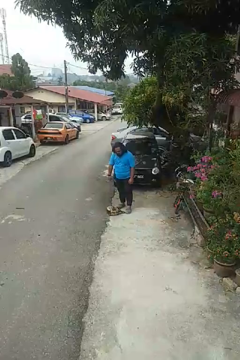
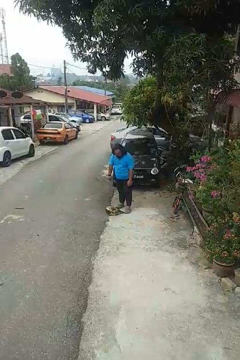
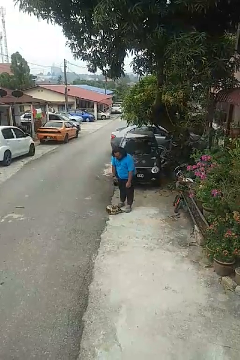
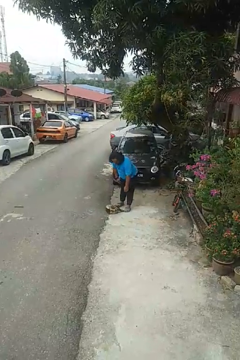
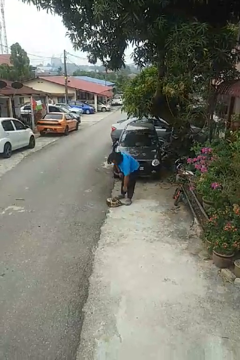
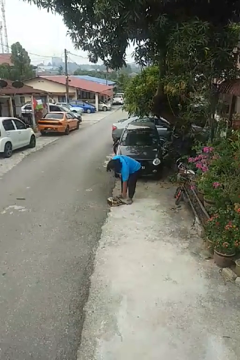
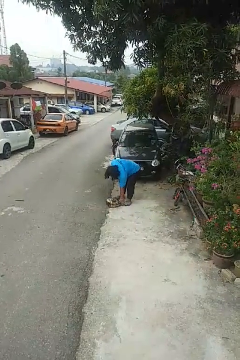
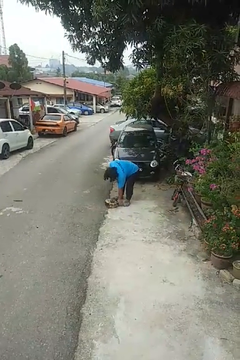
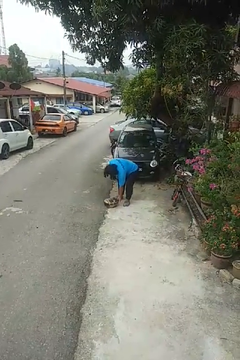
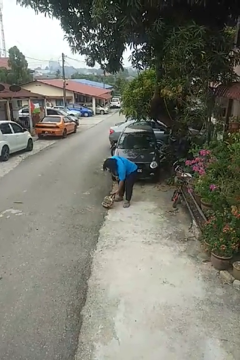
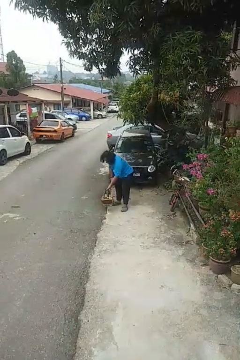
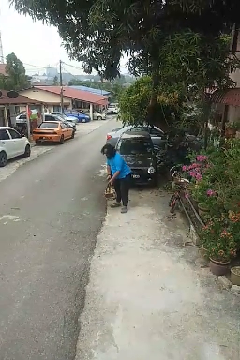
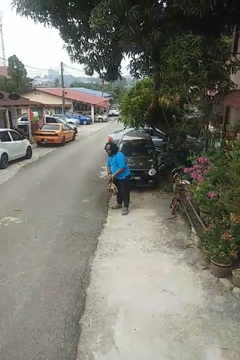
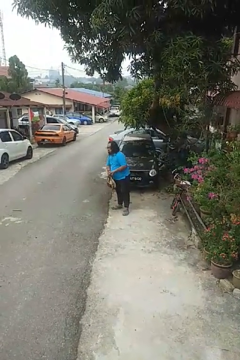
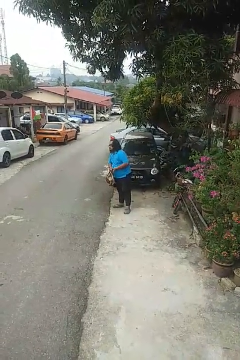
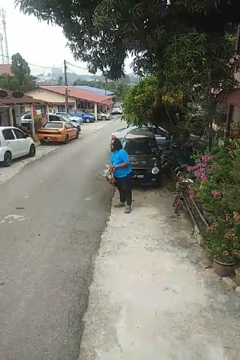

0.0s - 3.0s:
person picks up object from floor

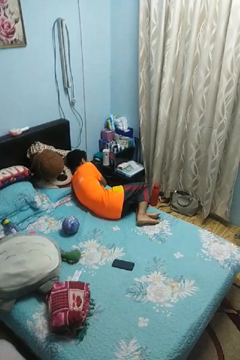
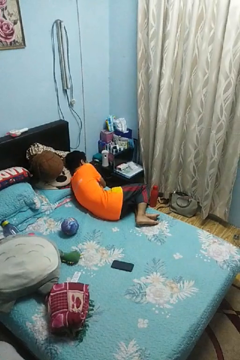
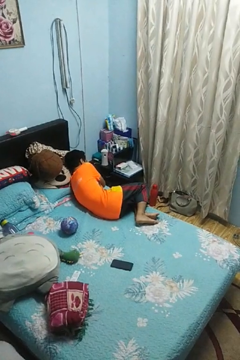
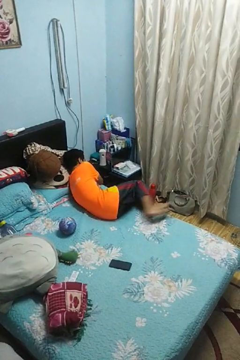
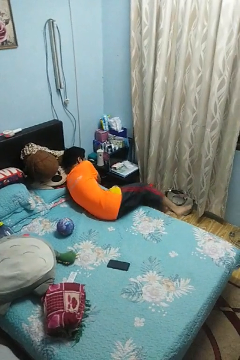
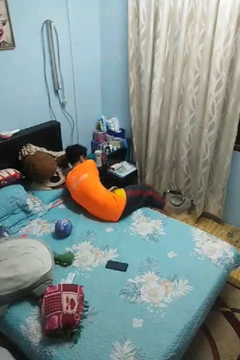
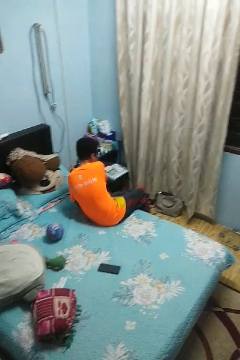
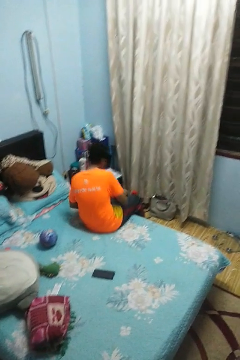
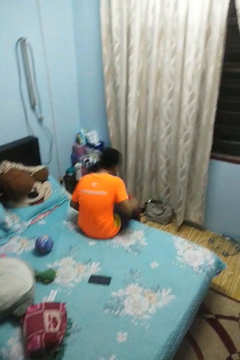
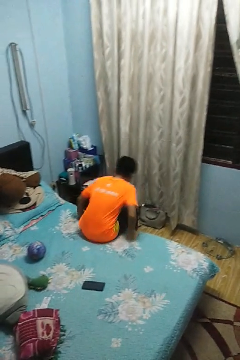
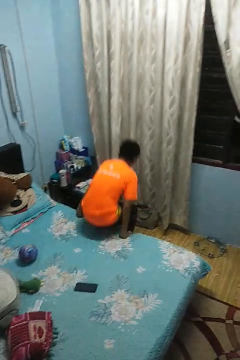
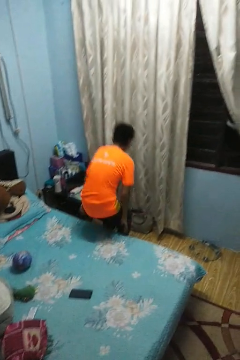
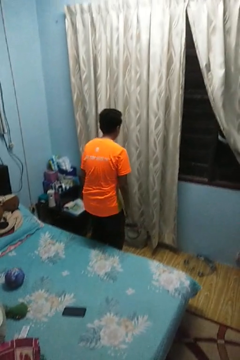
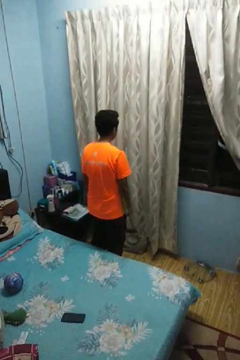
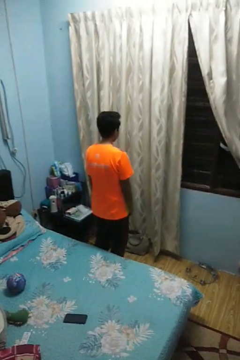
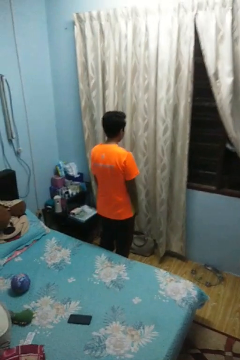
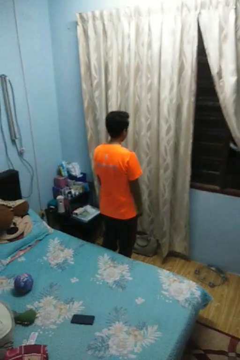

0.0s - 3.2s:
person stands up

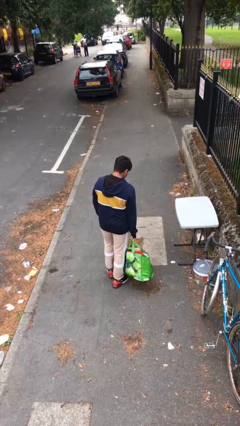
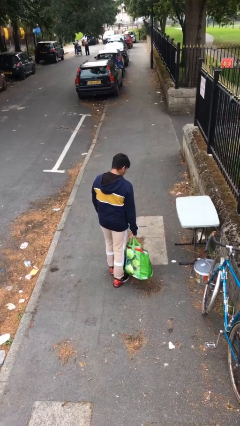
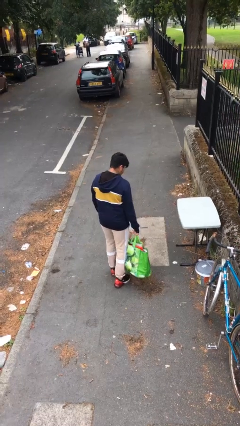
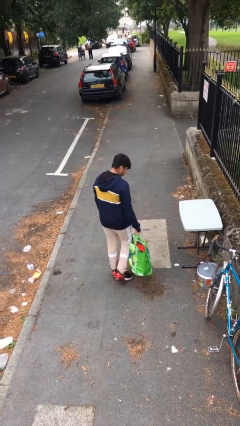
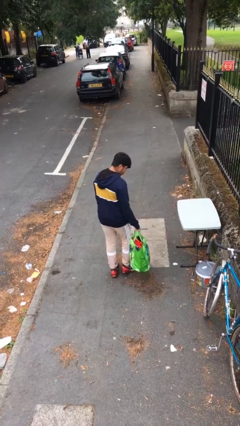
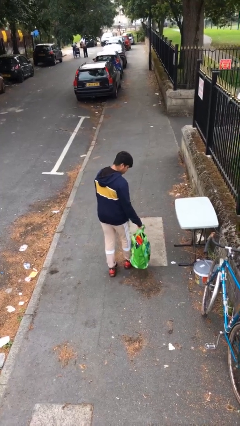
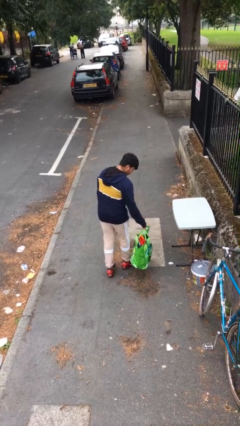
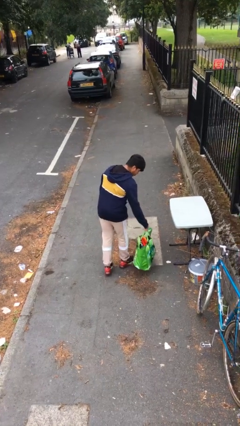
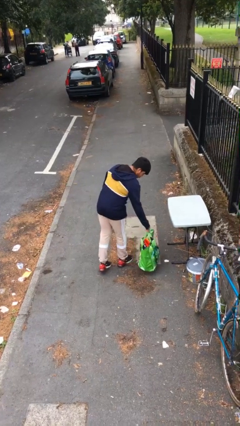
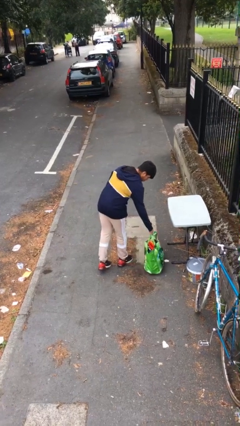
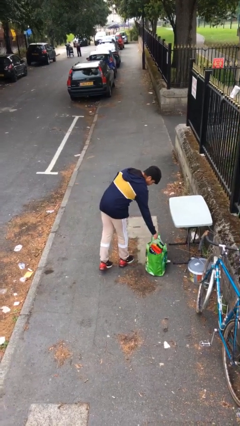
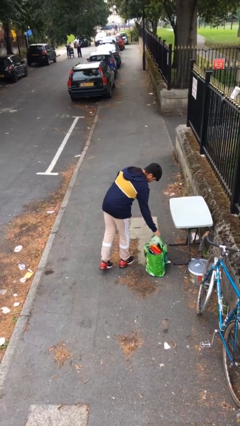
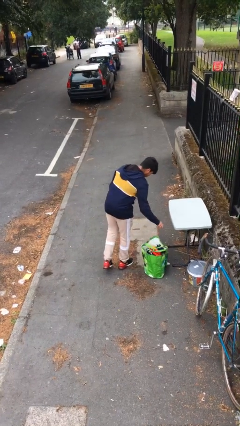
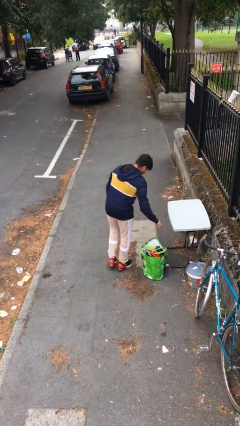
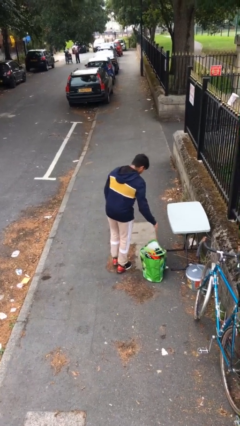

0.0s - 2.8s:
person puts down object on floor

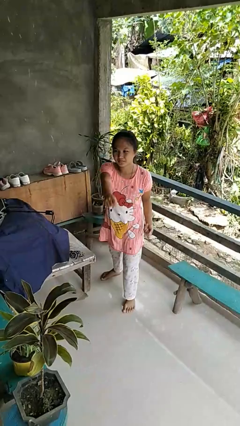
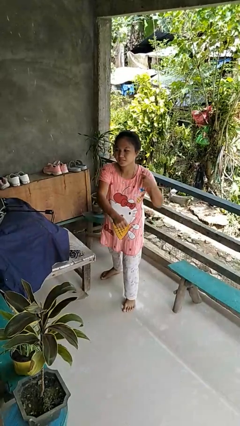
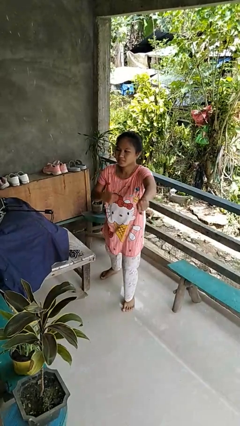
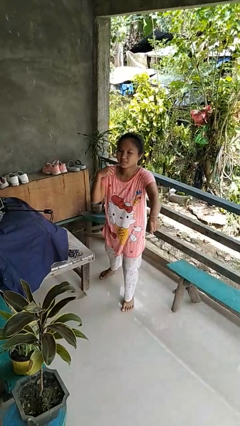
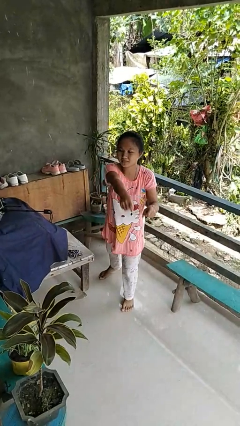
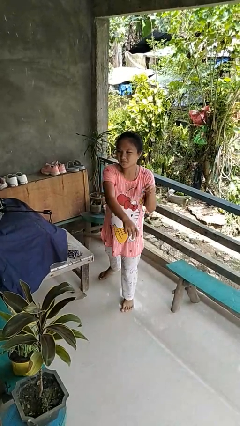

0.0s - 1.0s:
person karate chop

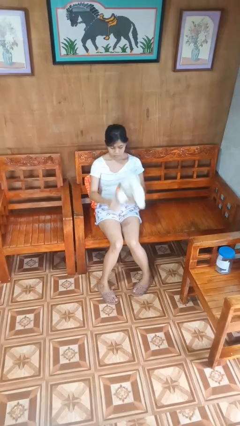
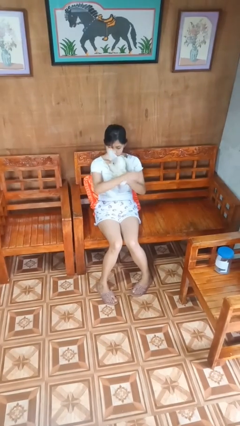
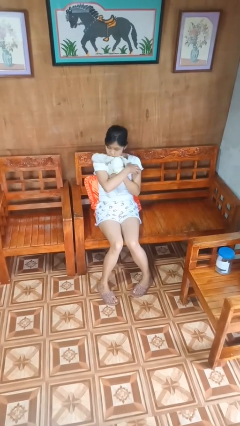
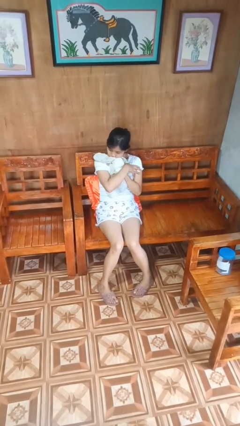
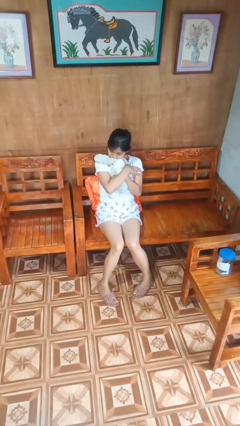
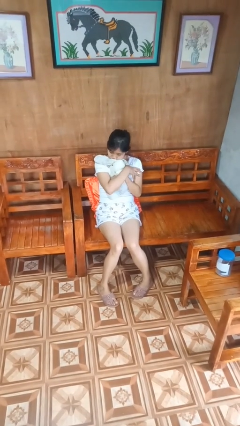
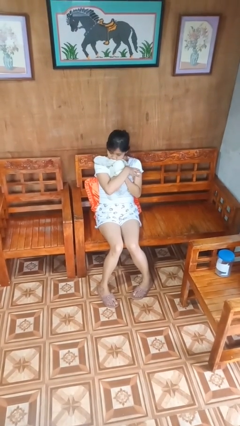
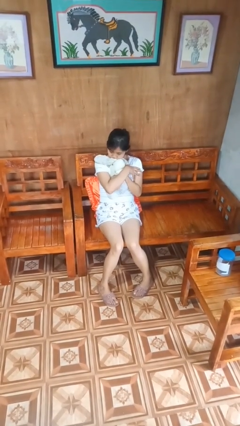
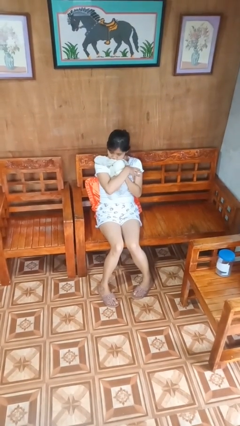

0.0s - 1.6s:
person hugs stuffed animal

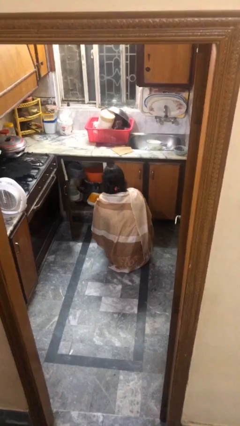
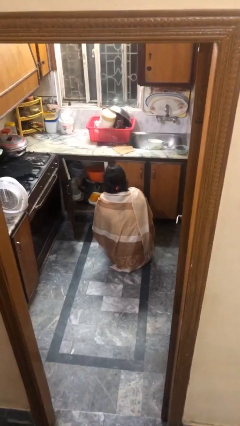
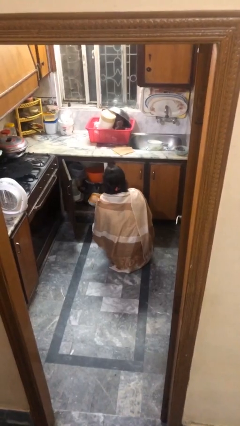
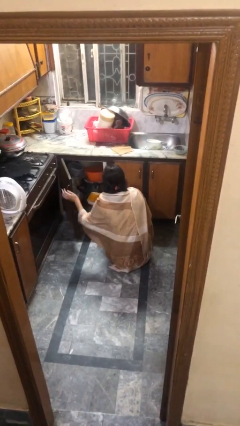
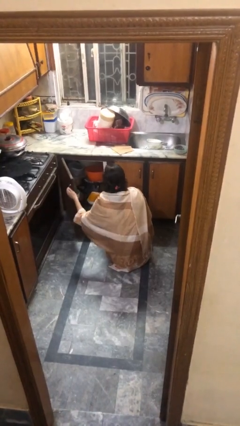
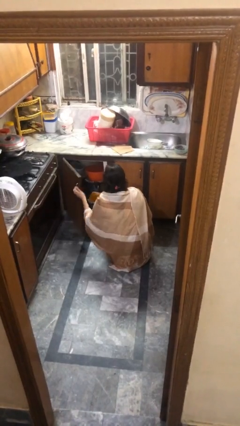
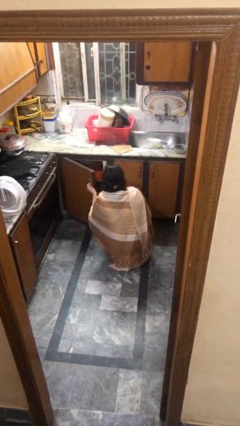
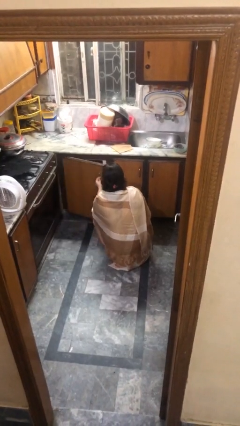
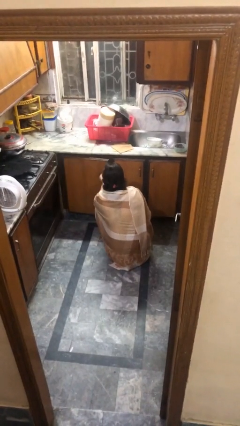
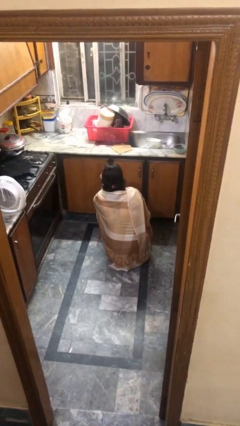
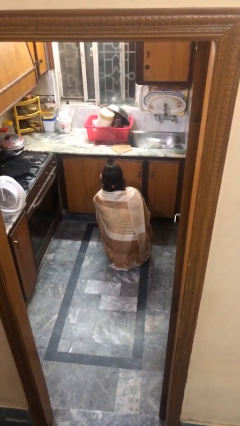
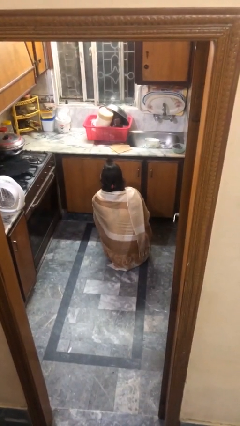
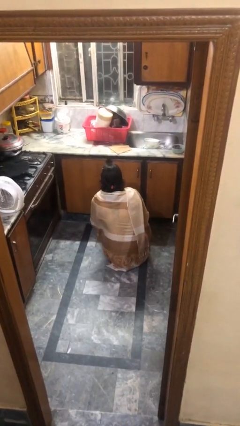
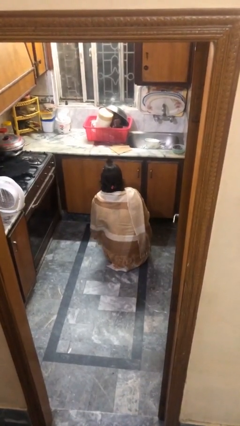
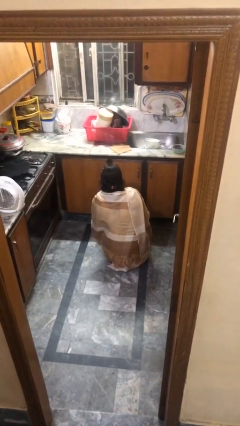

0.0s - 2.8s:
person closes kitchen drawer

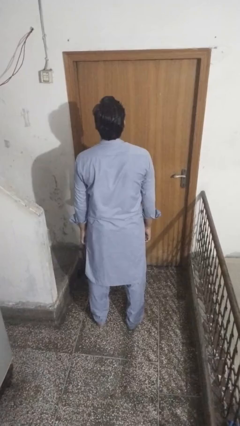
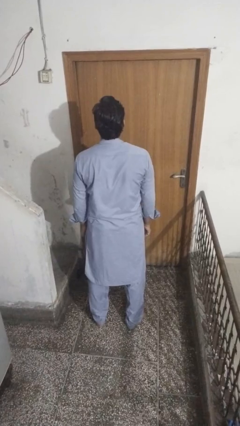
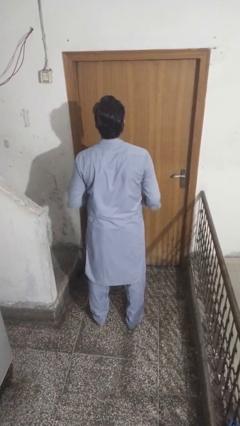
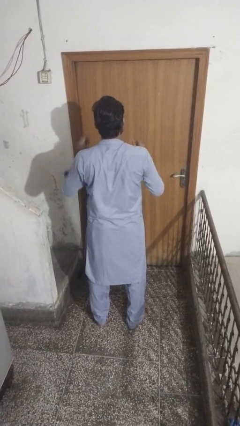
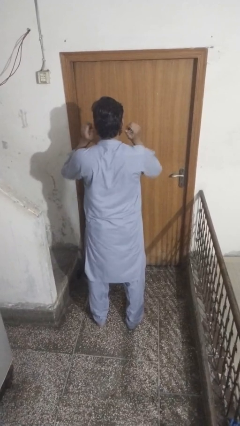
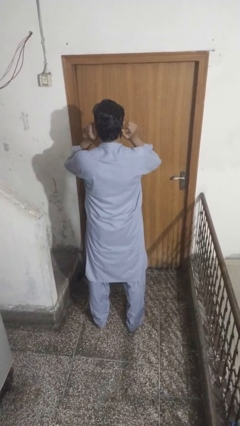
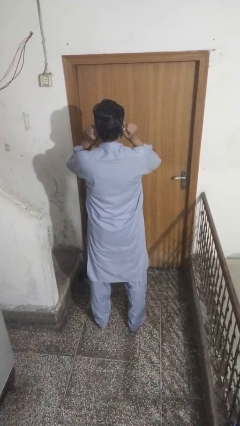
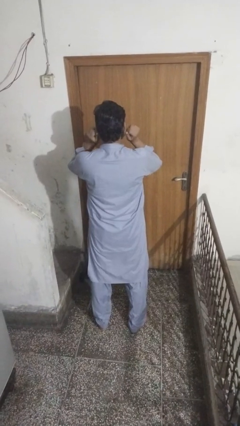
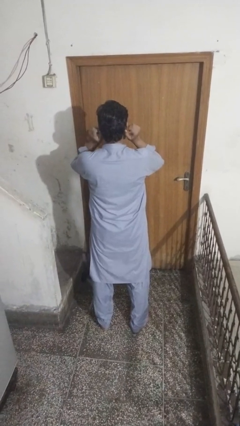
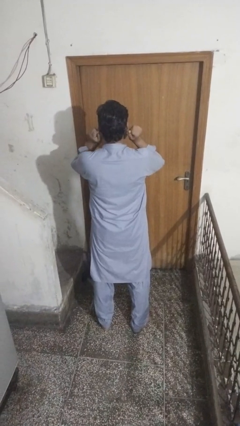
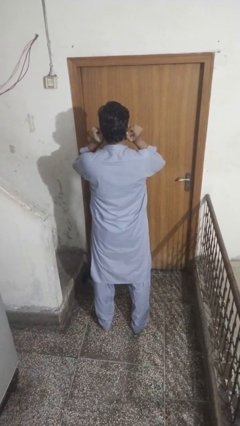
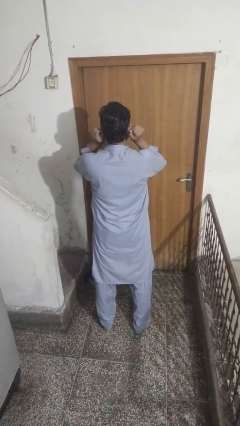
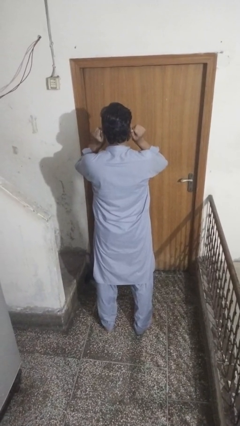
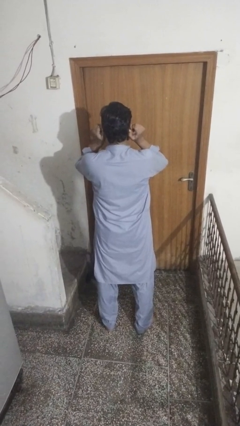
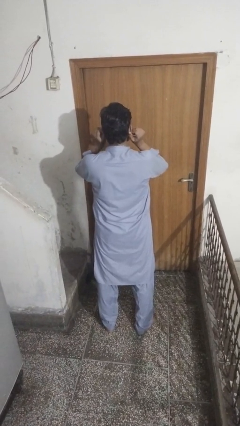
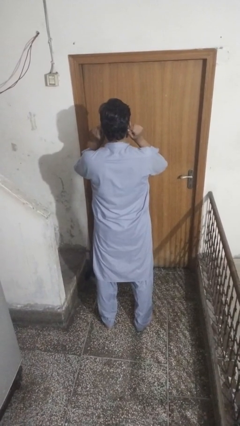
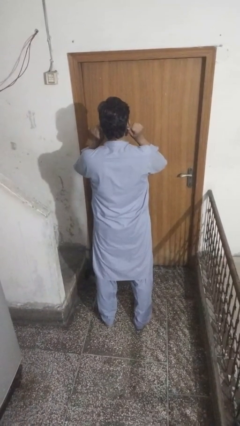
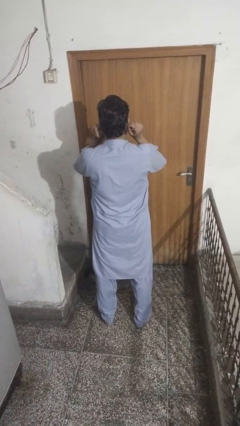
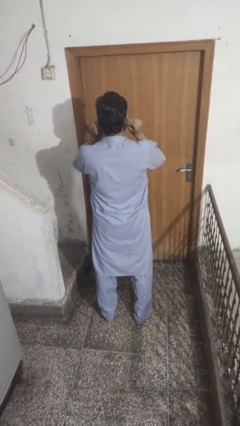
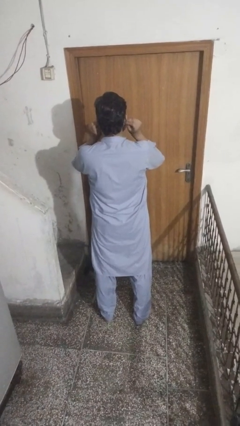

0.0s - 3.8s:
person touches earlobe
